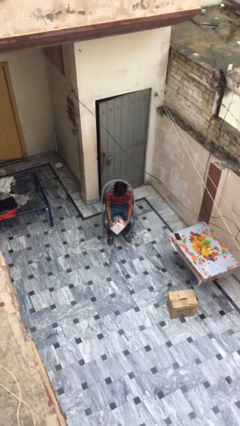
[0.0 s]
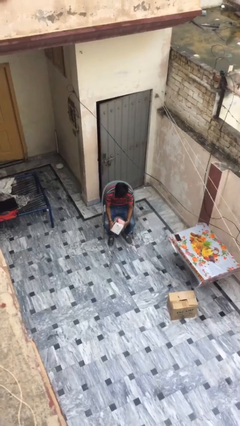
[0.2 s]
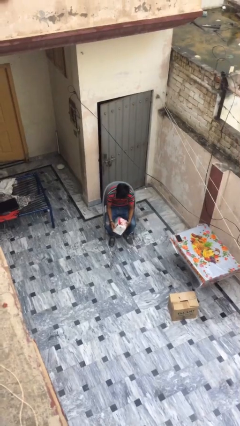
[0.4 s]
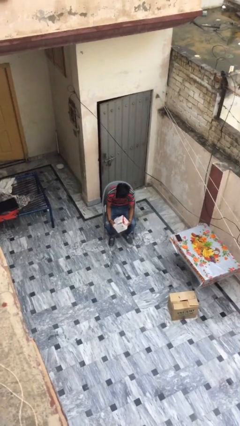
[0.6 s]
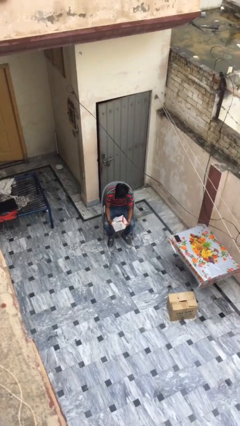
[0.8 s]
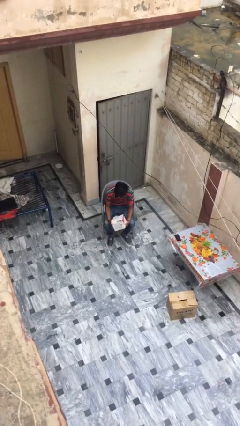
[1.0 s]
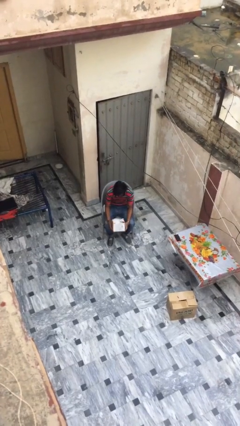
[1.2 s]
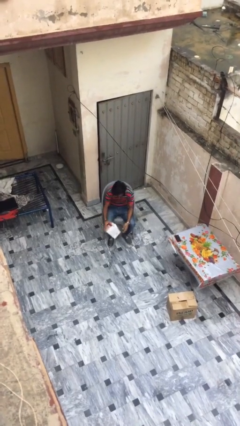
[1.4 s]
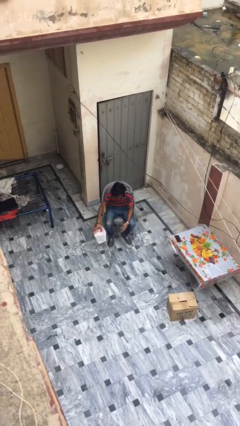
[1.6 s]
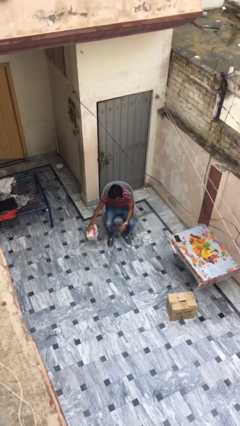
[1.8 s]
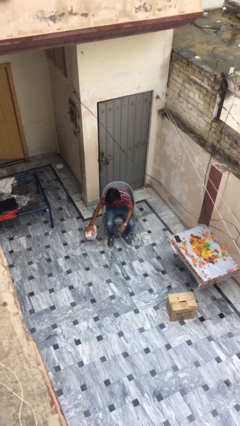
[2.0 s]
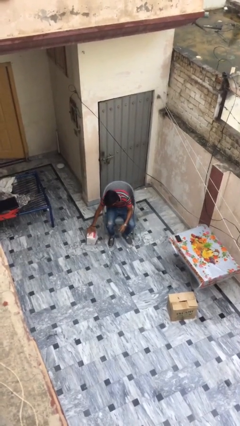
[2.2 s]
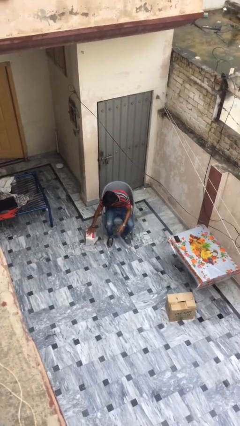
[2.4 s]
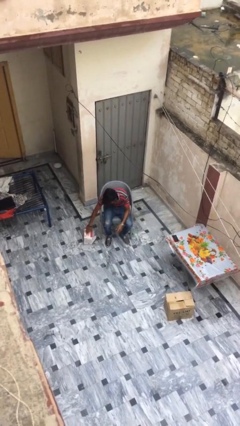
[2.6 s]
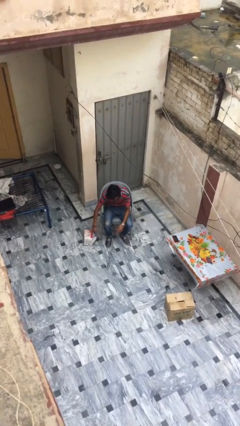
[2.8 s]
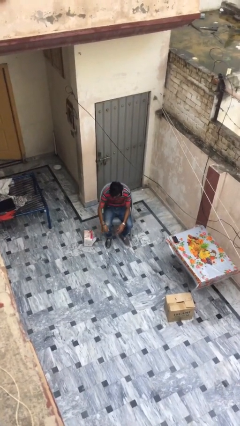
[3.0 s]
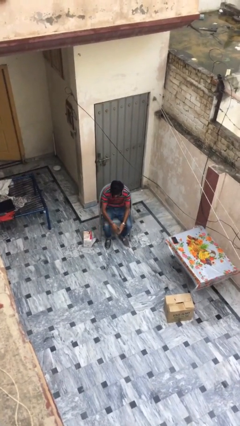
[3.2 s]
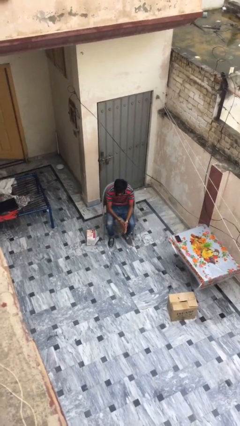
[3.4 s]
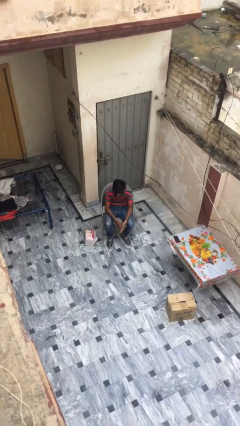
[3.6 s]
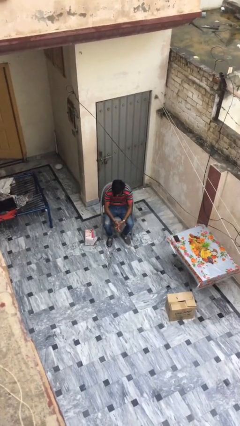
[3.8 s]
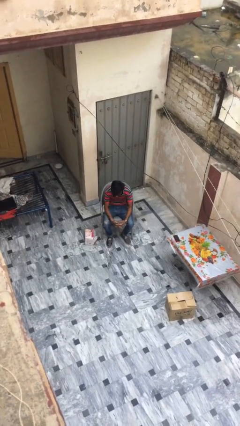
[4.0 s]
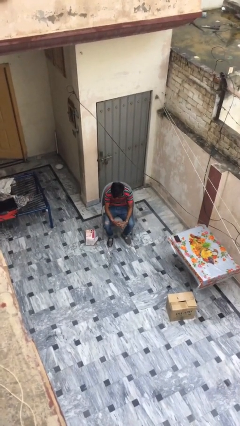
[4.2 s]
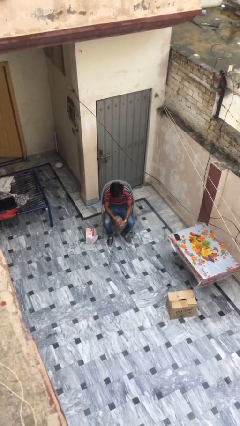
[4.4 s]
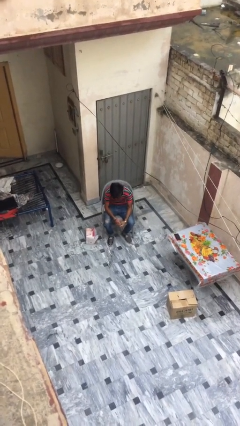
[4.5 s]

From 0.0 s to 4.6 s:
person puts down object on floor

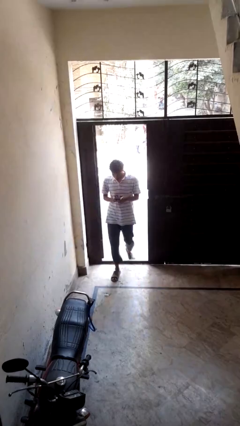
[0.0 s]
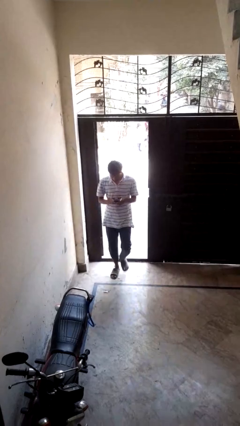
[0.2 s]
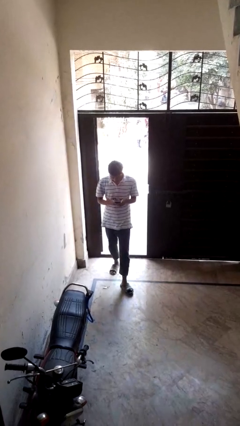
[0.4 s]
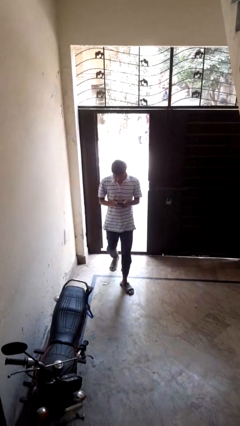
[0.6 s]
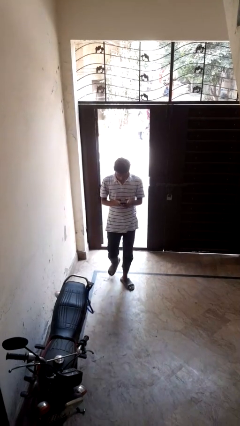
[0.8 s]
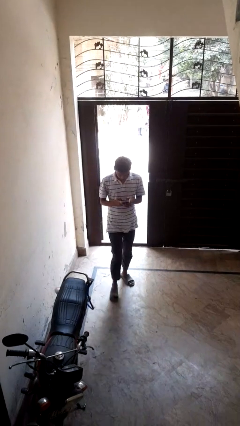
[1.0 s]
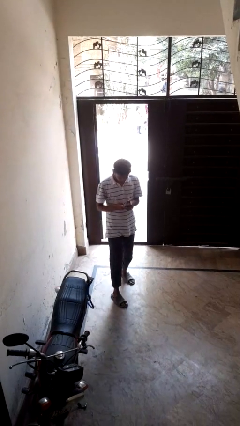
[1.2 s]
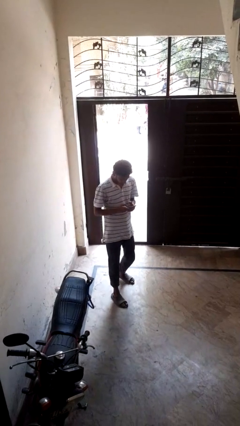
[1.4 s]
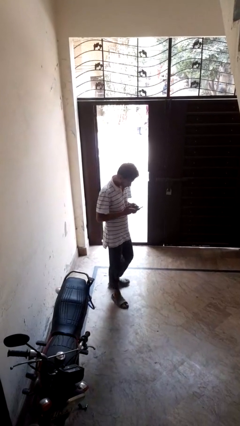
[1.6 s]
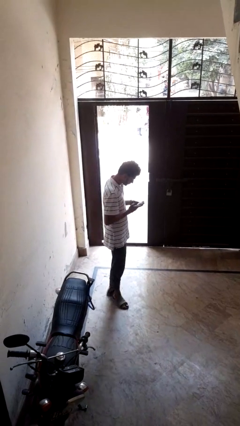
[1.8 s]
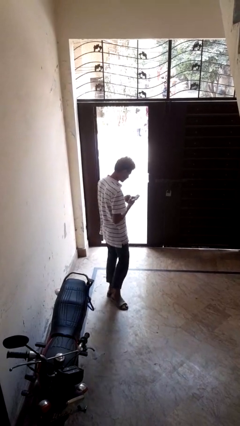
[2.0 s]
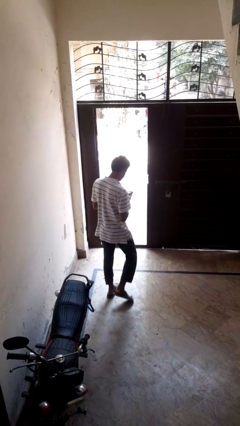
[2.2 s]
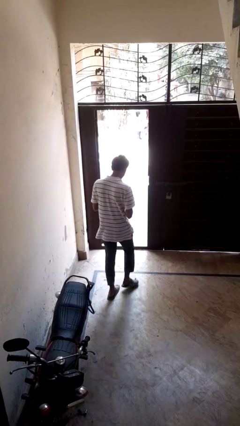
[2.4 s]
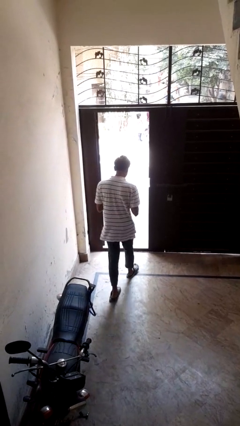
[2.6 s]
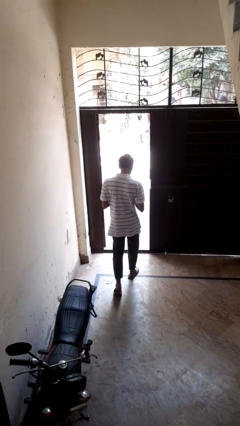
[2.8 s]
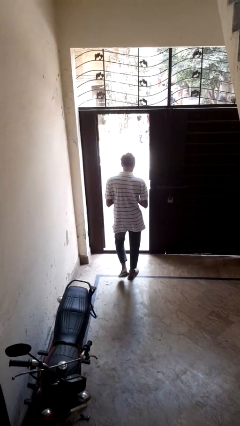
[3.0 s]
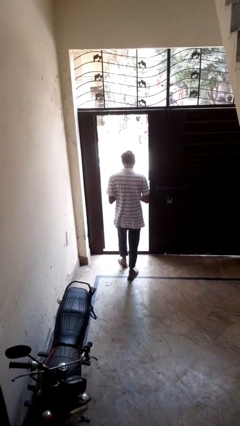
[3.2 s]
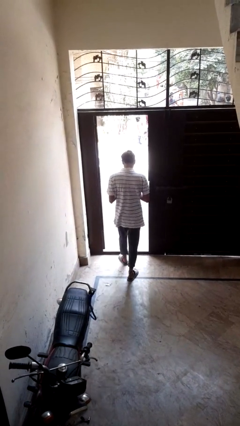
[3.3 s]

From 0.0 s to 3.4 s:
person enters scene through structure

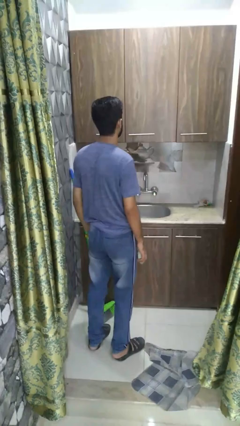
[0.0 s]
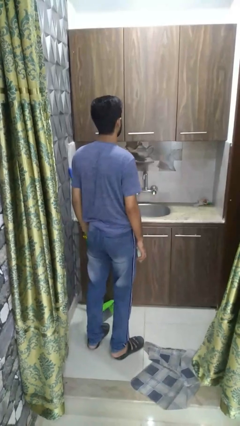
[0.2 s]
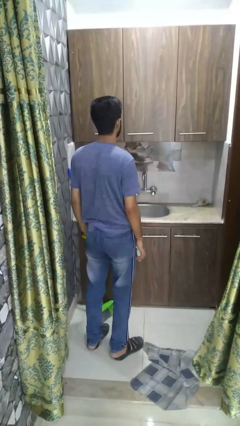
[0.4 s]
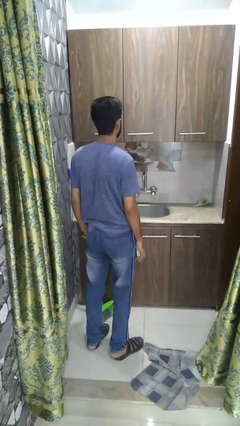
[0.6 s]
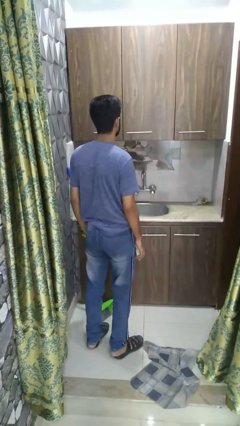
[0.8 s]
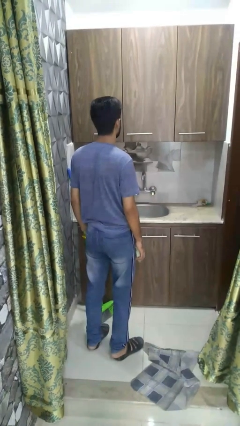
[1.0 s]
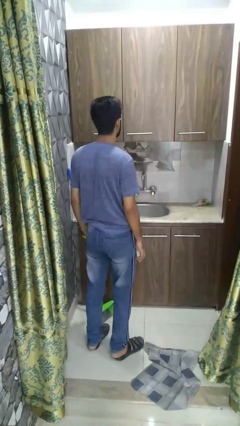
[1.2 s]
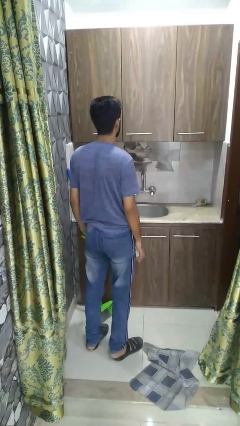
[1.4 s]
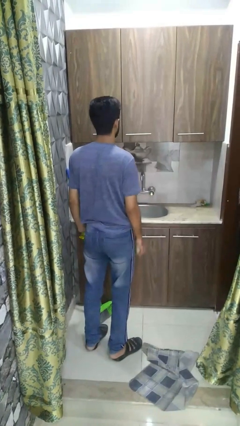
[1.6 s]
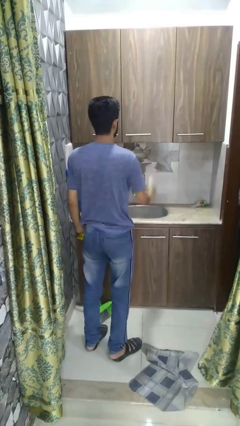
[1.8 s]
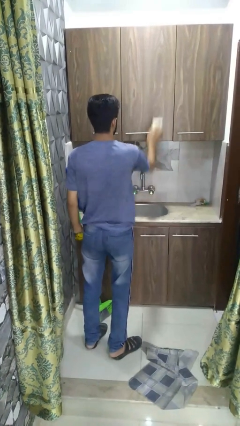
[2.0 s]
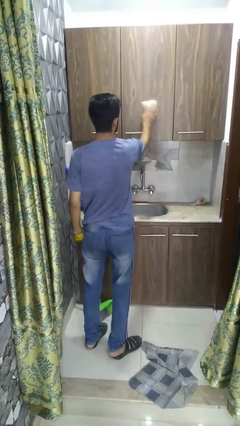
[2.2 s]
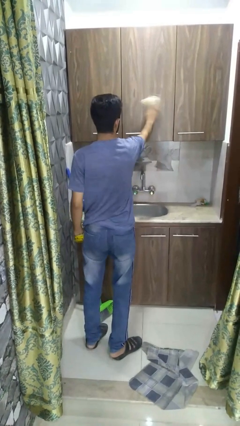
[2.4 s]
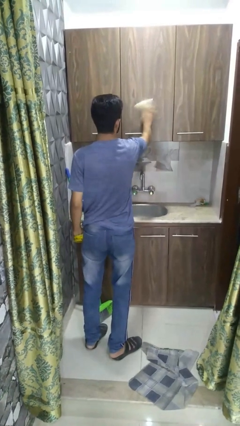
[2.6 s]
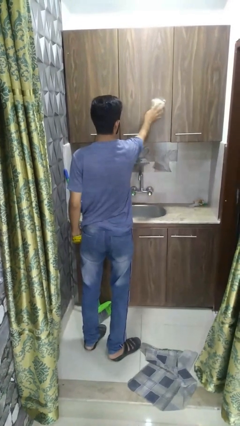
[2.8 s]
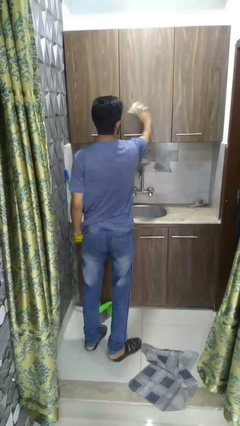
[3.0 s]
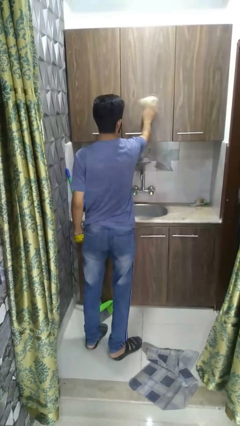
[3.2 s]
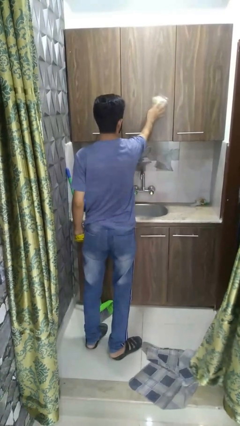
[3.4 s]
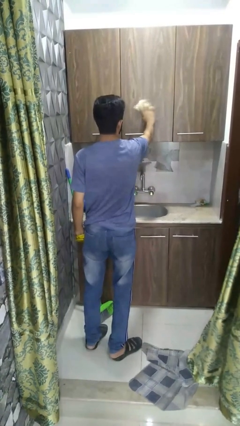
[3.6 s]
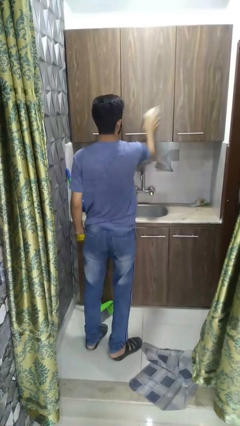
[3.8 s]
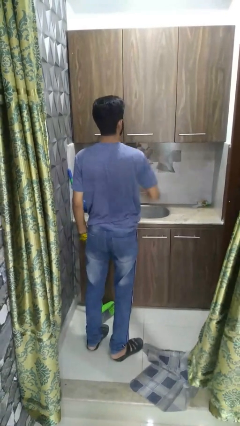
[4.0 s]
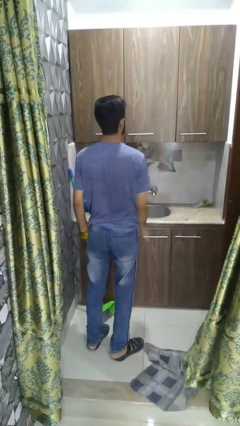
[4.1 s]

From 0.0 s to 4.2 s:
person washes window

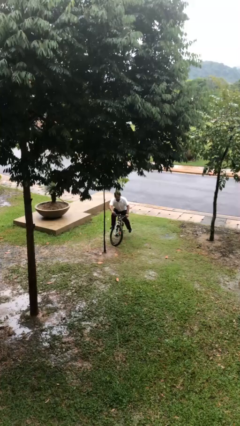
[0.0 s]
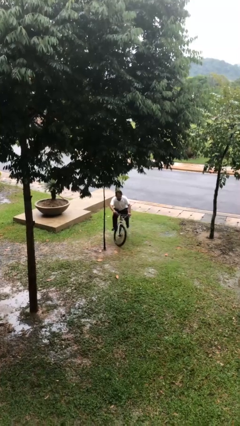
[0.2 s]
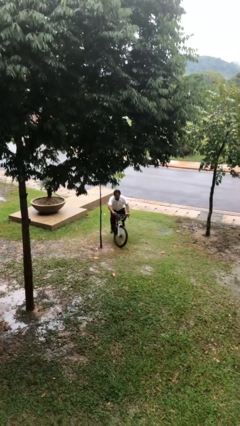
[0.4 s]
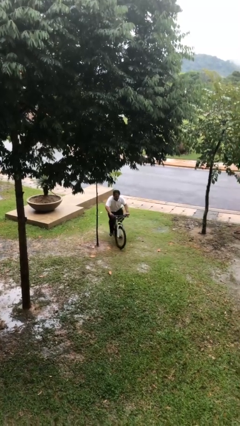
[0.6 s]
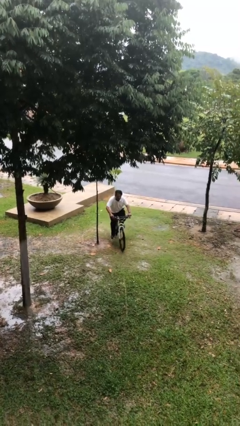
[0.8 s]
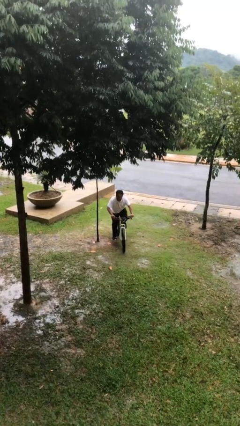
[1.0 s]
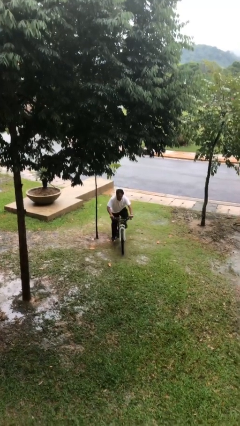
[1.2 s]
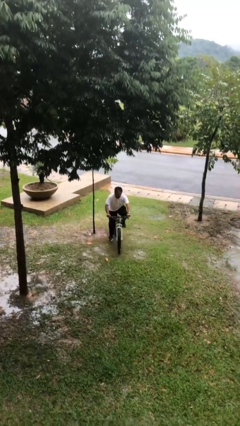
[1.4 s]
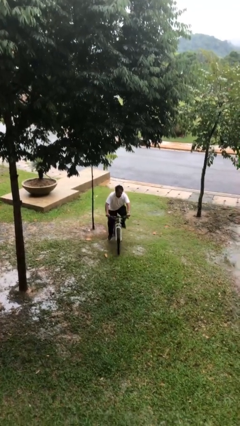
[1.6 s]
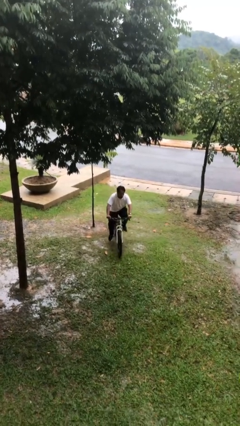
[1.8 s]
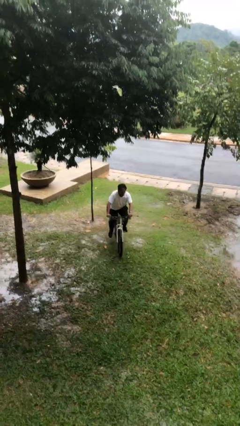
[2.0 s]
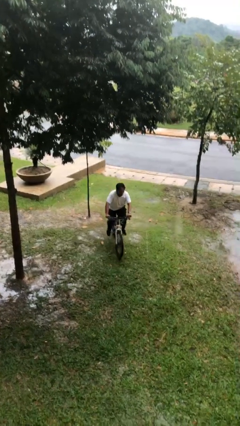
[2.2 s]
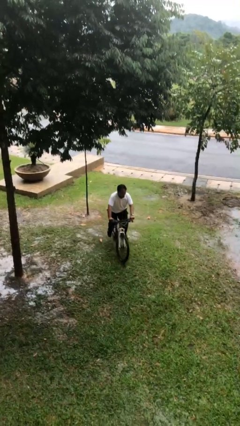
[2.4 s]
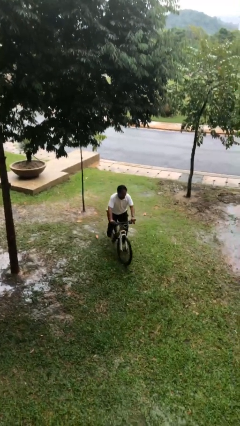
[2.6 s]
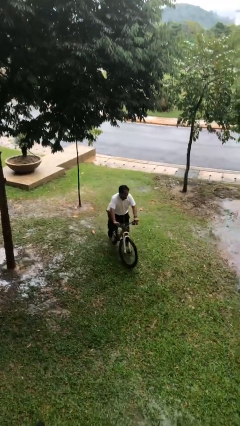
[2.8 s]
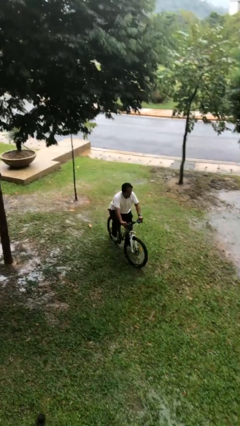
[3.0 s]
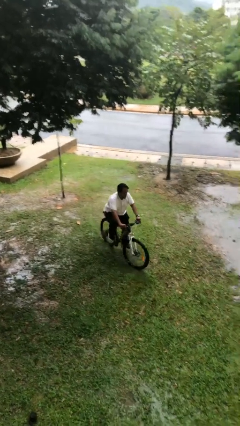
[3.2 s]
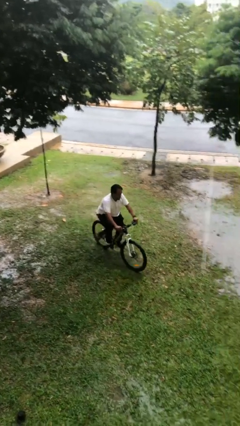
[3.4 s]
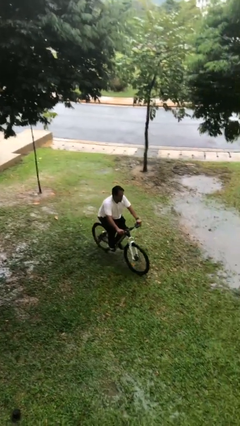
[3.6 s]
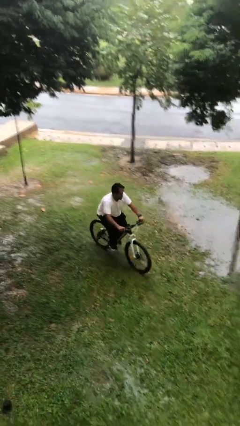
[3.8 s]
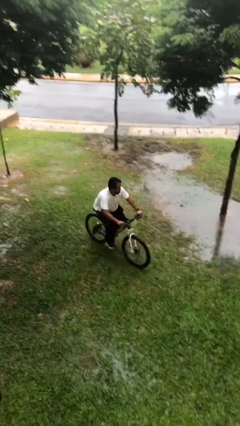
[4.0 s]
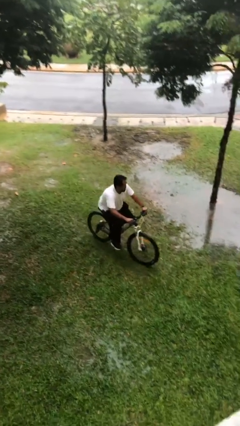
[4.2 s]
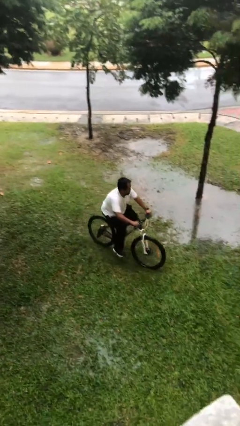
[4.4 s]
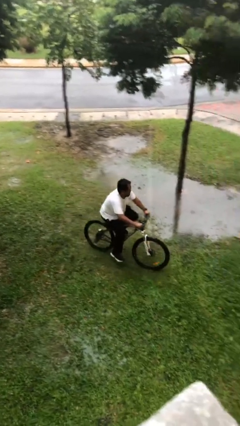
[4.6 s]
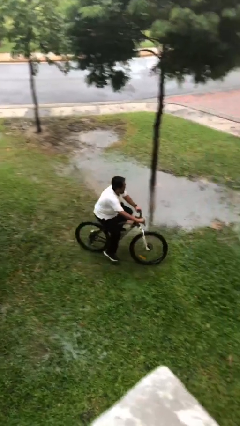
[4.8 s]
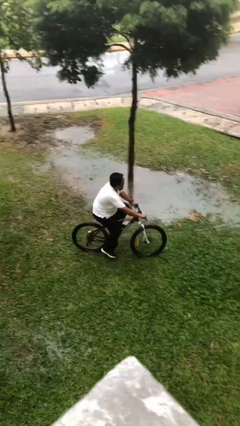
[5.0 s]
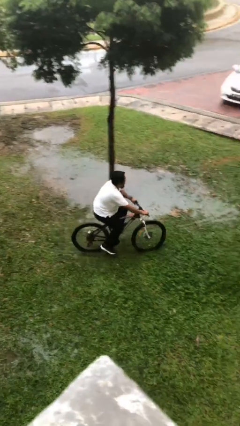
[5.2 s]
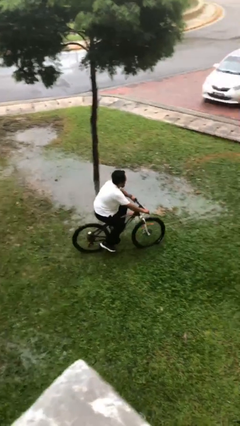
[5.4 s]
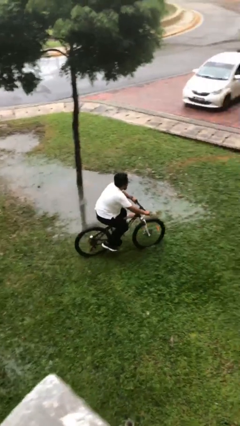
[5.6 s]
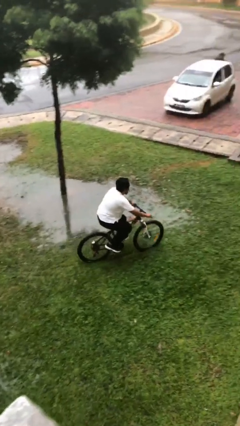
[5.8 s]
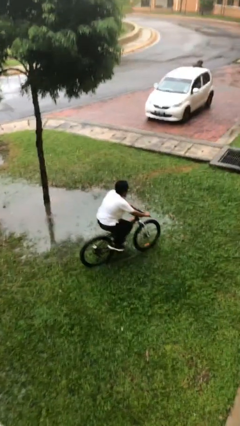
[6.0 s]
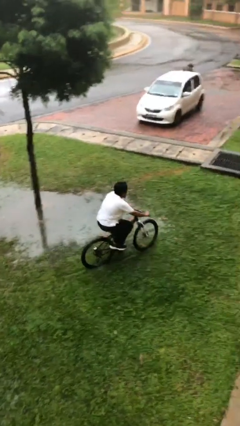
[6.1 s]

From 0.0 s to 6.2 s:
person rides bicycle
